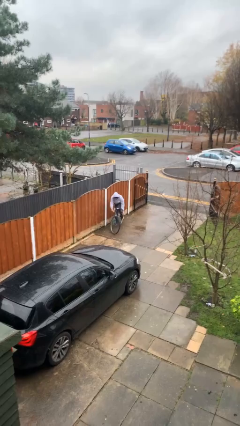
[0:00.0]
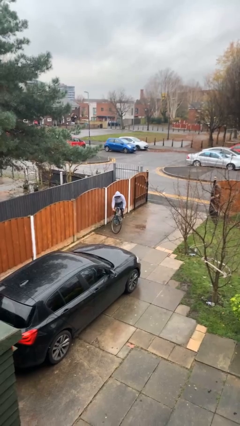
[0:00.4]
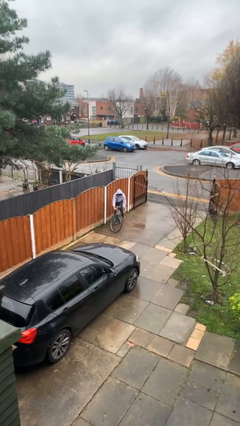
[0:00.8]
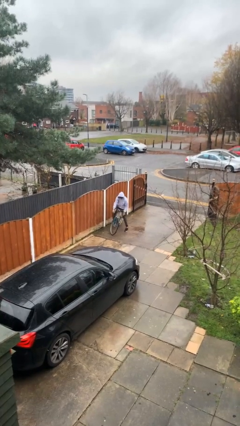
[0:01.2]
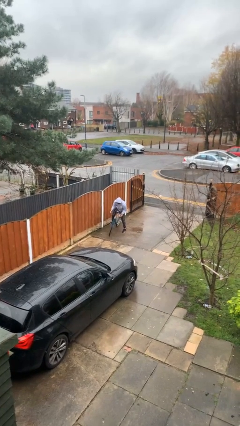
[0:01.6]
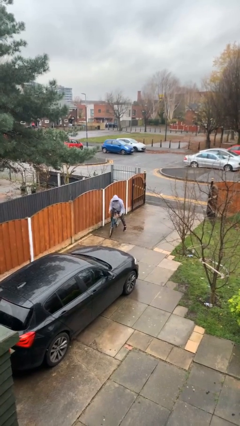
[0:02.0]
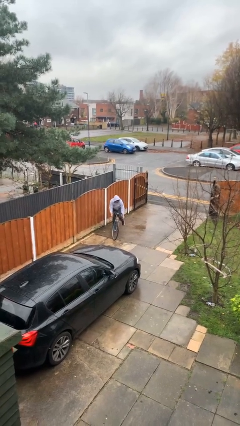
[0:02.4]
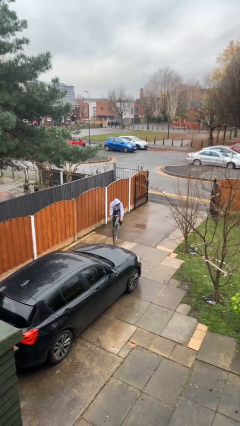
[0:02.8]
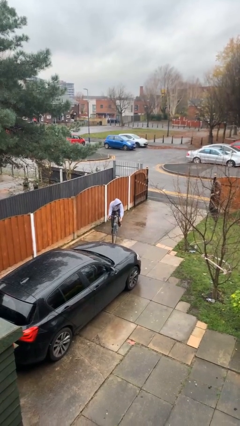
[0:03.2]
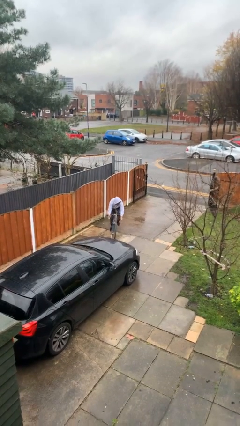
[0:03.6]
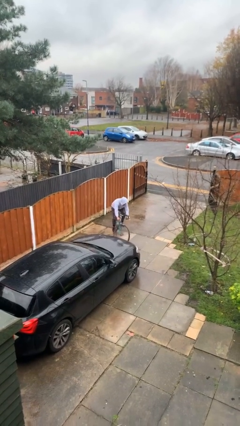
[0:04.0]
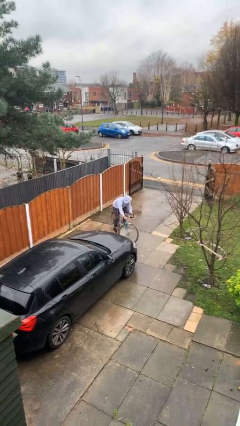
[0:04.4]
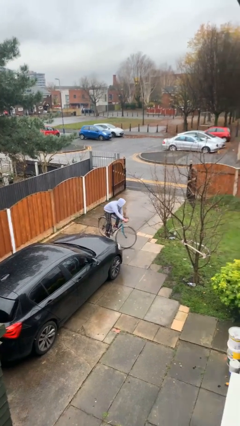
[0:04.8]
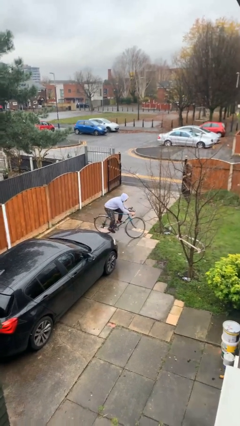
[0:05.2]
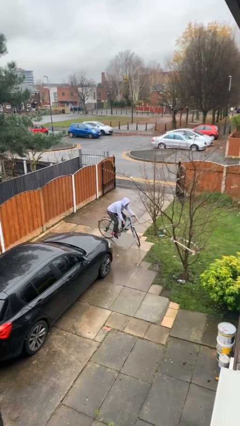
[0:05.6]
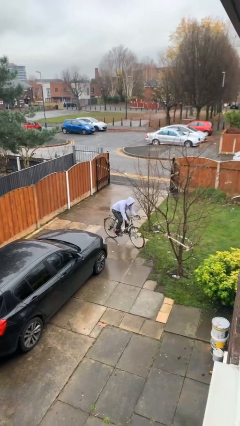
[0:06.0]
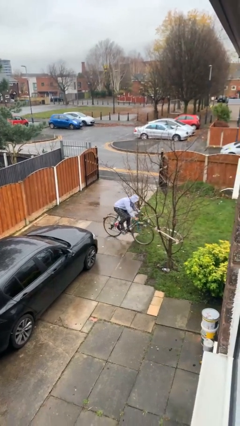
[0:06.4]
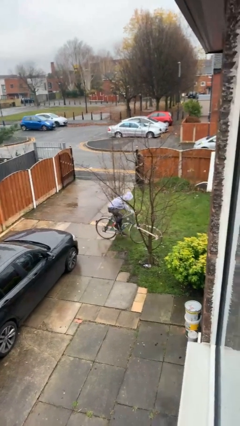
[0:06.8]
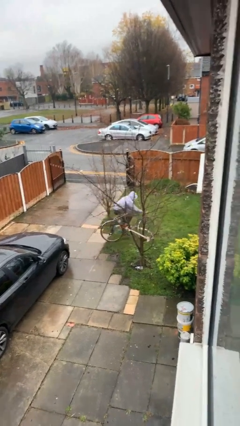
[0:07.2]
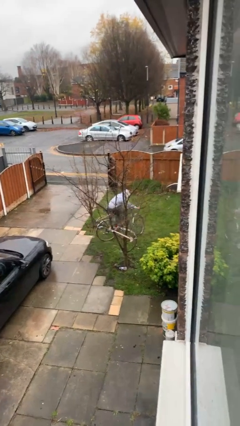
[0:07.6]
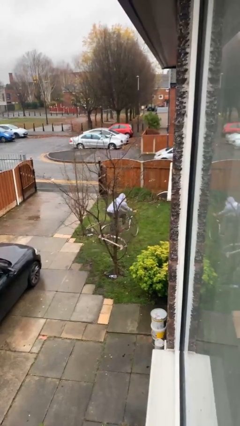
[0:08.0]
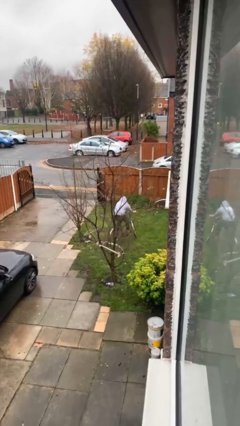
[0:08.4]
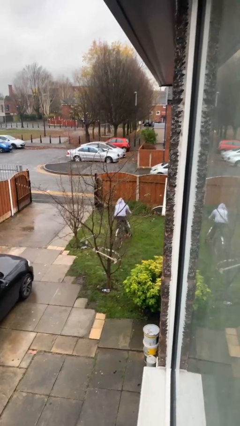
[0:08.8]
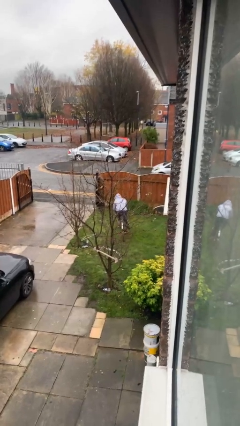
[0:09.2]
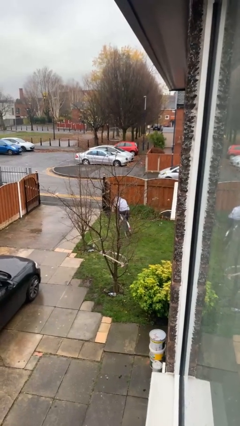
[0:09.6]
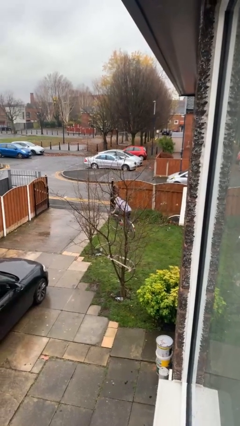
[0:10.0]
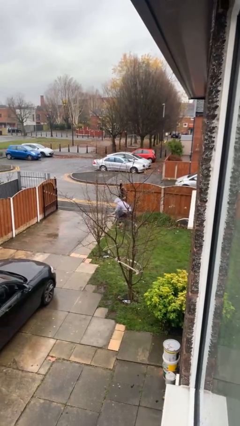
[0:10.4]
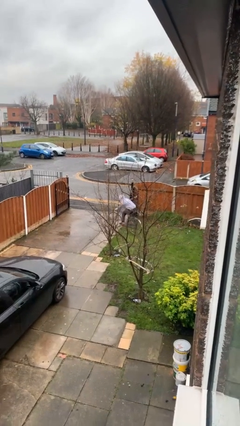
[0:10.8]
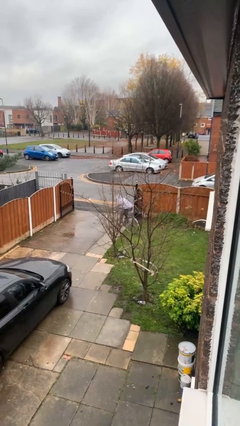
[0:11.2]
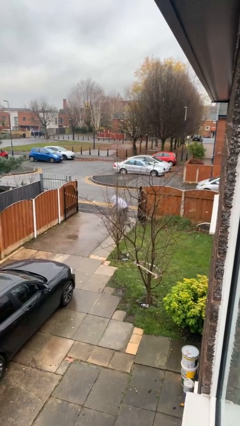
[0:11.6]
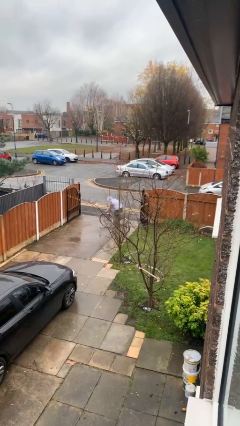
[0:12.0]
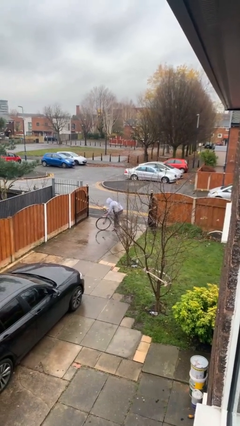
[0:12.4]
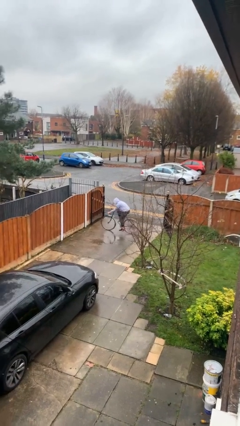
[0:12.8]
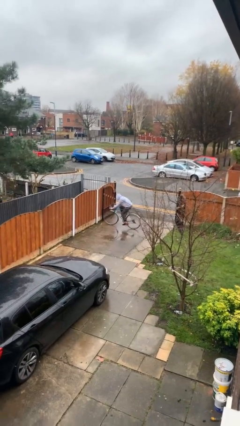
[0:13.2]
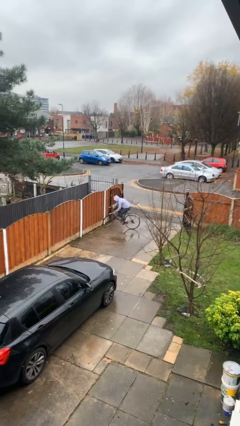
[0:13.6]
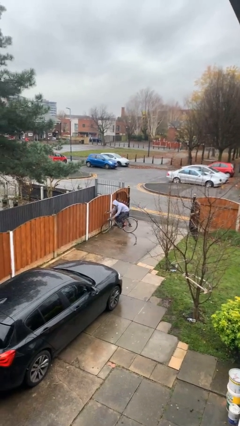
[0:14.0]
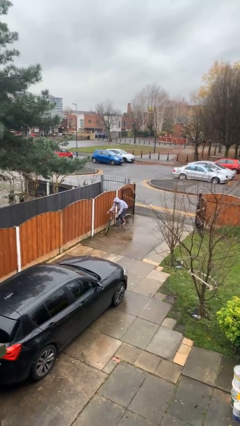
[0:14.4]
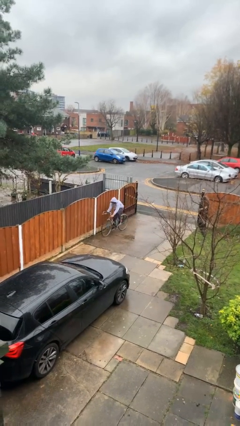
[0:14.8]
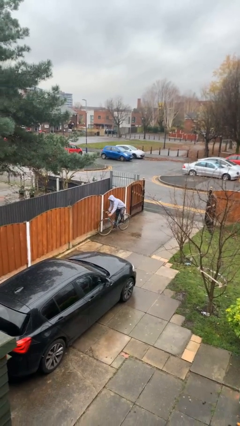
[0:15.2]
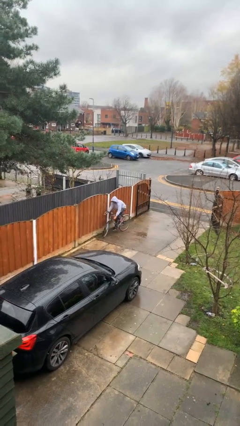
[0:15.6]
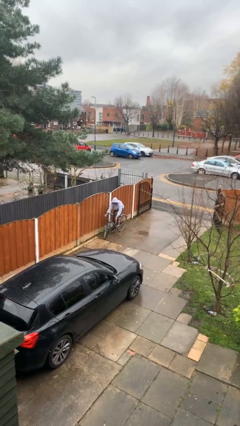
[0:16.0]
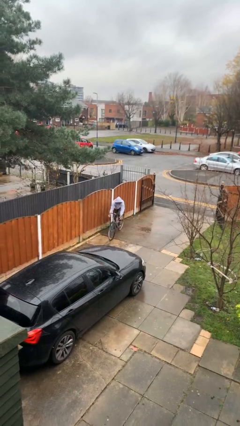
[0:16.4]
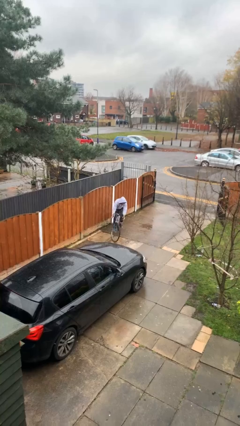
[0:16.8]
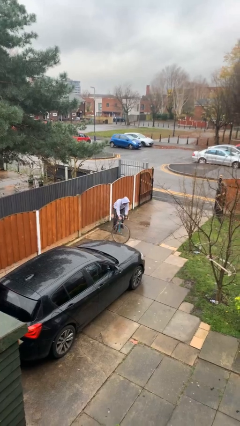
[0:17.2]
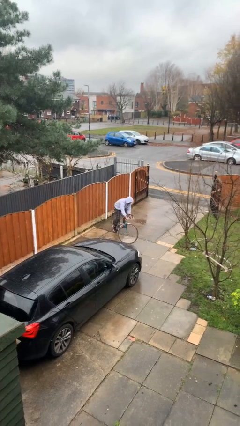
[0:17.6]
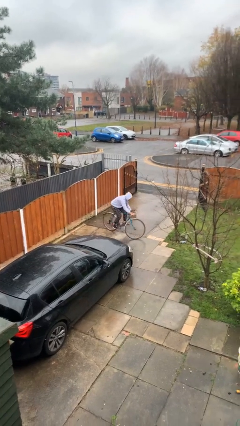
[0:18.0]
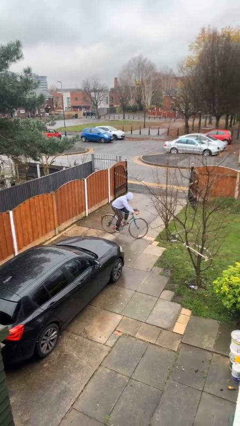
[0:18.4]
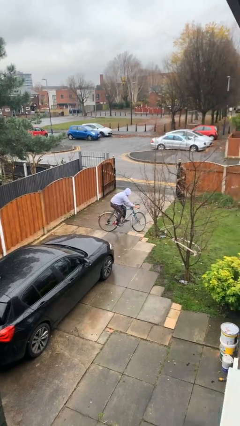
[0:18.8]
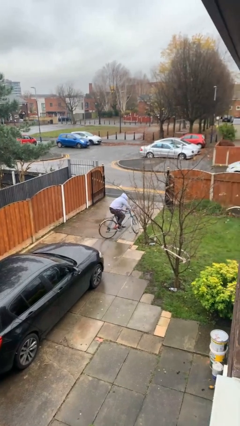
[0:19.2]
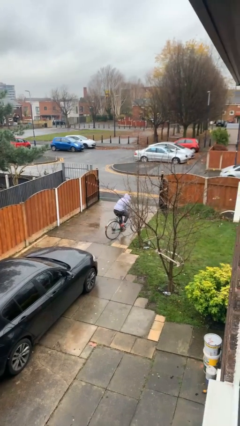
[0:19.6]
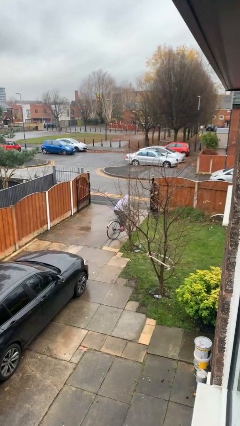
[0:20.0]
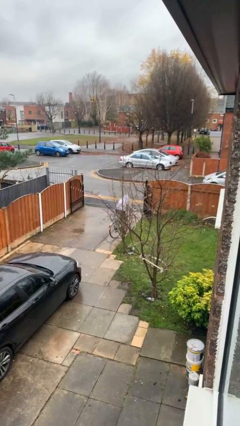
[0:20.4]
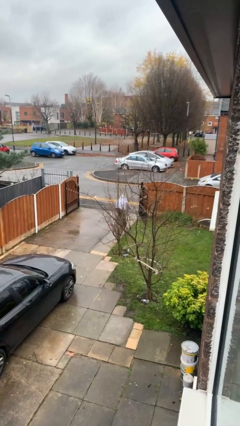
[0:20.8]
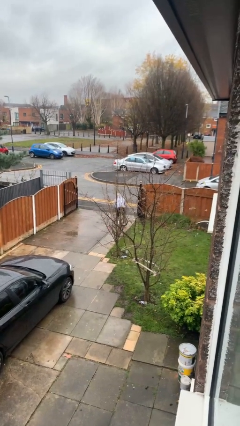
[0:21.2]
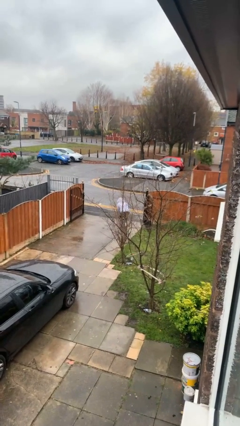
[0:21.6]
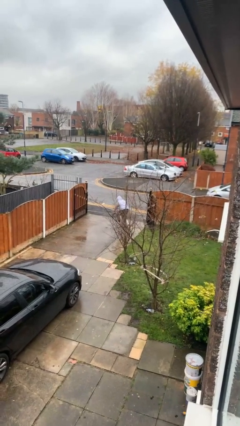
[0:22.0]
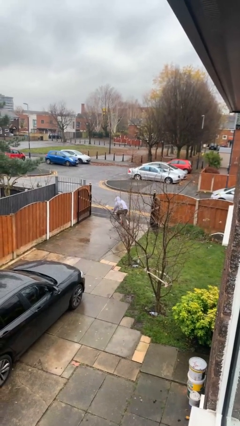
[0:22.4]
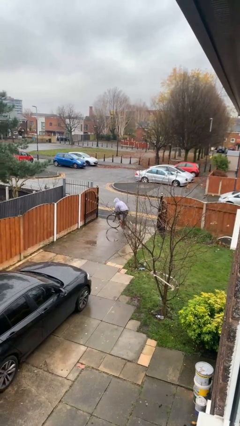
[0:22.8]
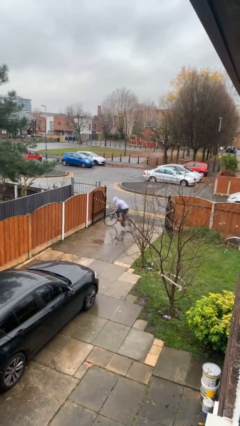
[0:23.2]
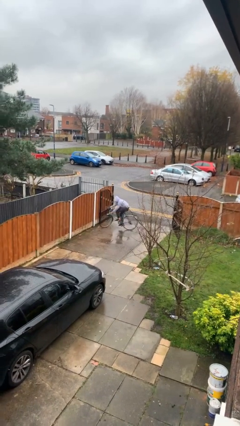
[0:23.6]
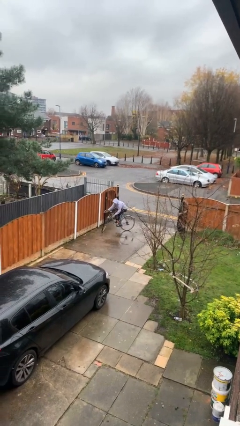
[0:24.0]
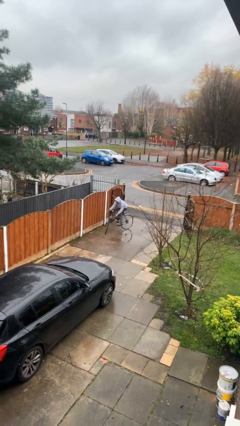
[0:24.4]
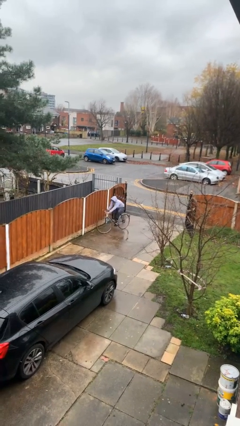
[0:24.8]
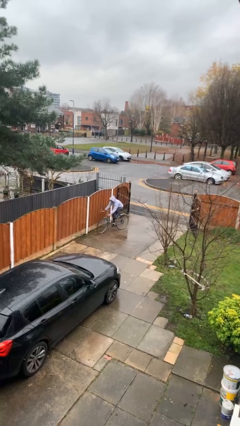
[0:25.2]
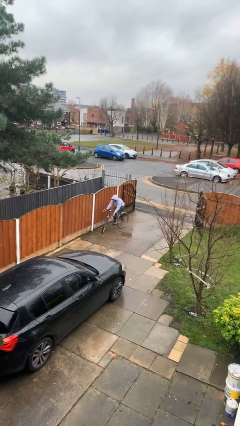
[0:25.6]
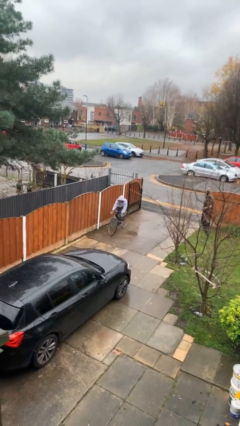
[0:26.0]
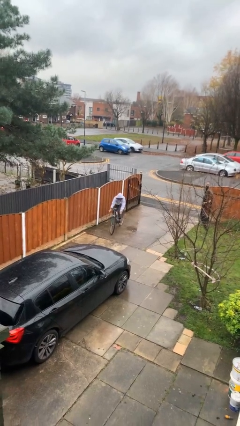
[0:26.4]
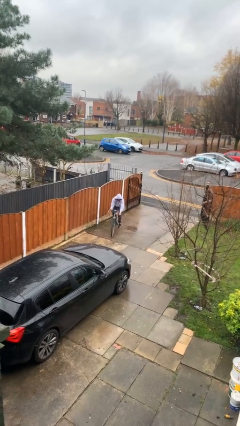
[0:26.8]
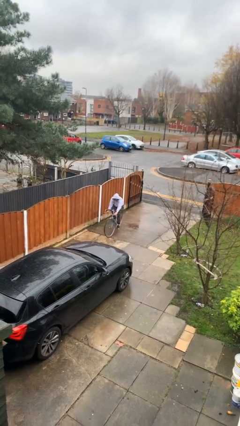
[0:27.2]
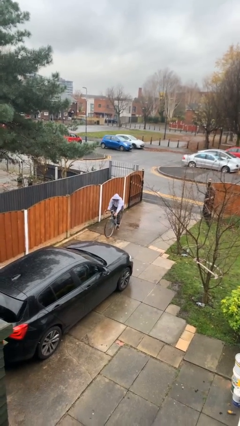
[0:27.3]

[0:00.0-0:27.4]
person rides bicycle

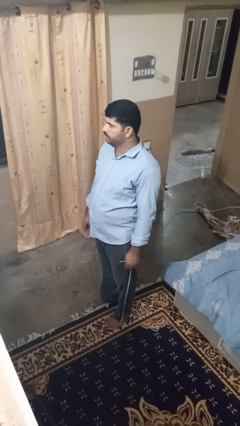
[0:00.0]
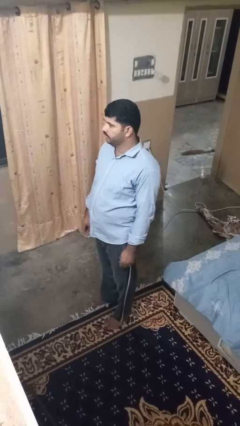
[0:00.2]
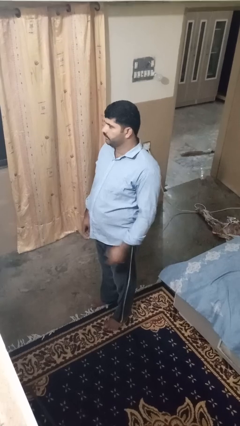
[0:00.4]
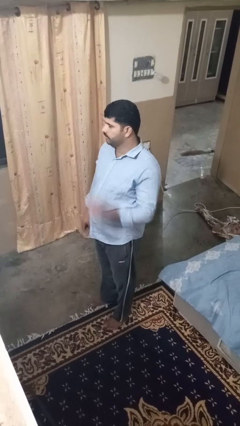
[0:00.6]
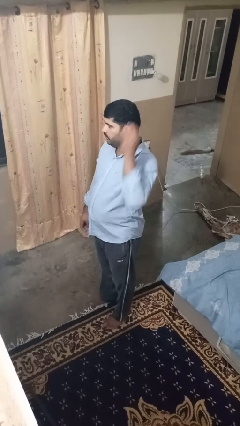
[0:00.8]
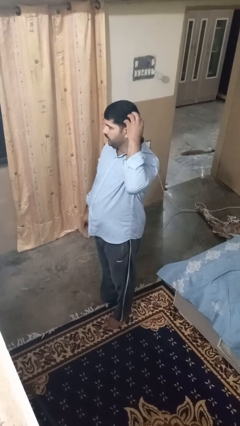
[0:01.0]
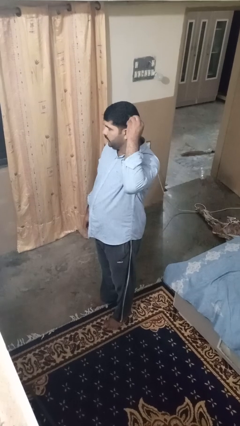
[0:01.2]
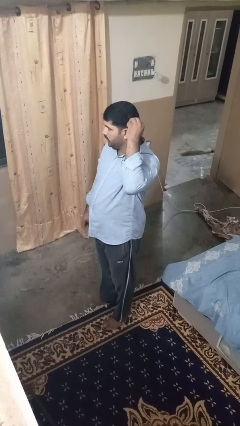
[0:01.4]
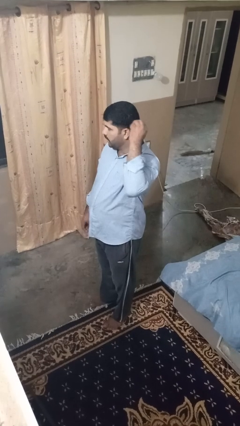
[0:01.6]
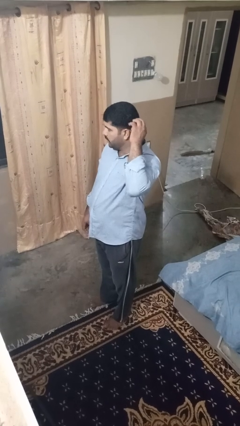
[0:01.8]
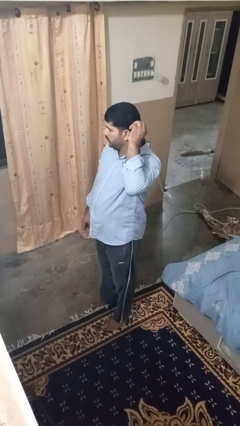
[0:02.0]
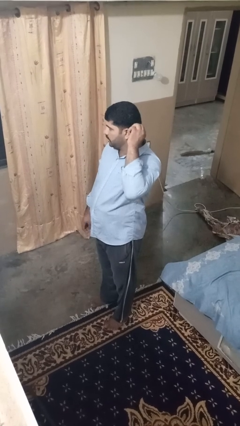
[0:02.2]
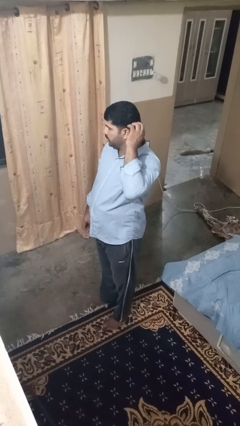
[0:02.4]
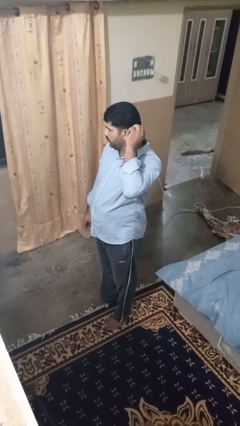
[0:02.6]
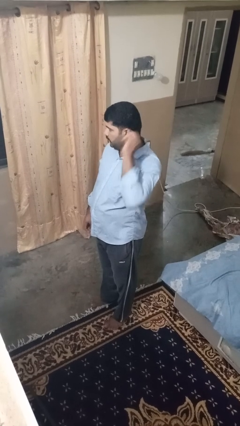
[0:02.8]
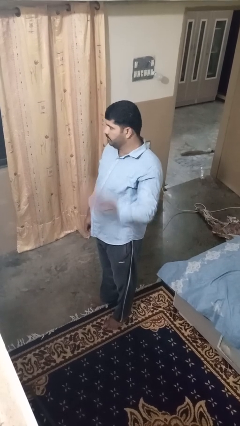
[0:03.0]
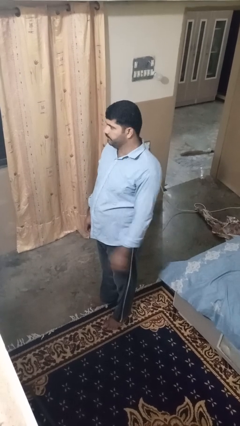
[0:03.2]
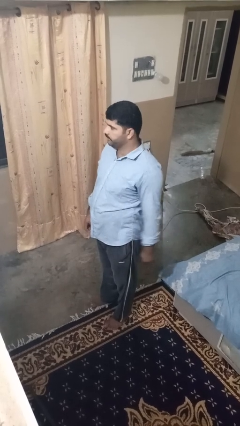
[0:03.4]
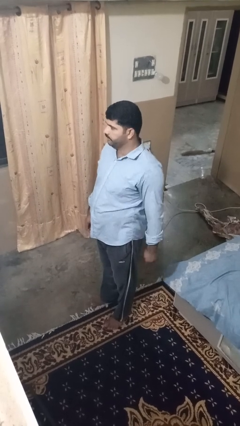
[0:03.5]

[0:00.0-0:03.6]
person strokes hair

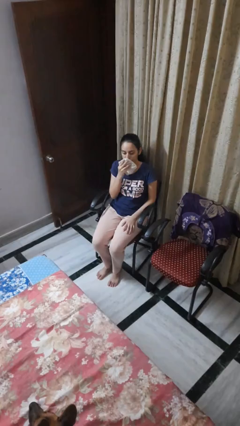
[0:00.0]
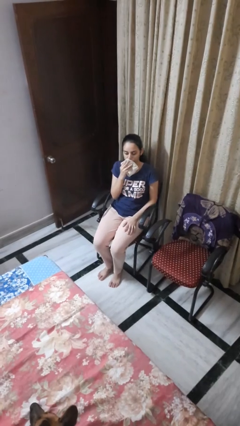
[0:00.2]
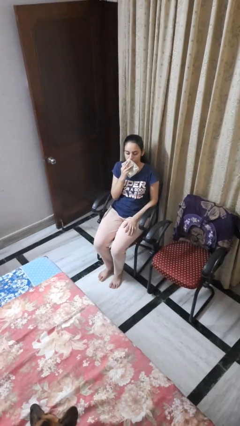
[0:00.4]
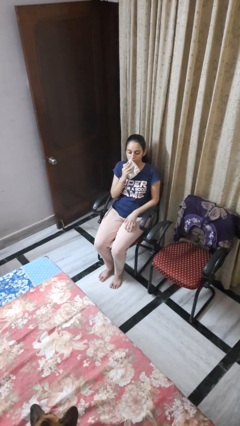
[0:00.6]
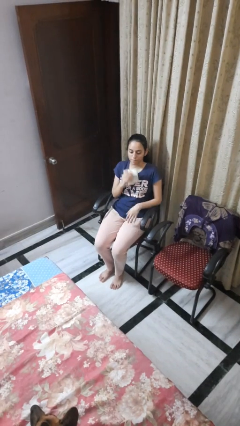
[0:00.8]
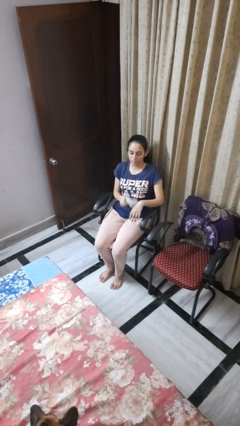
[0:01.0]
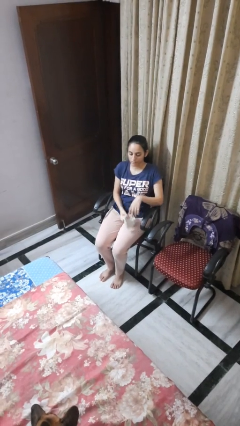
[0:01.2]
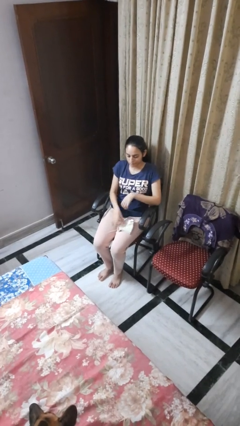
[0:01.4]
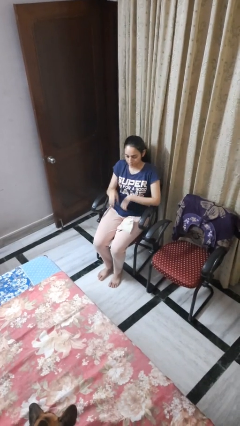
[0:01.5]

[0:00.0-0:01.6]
person wipes mouth with napkin
